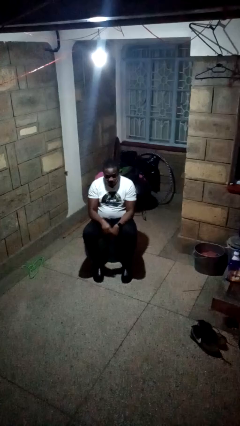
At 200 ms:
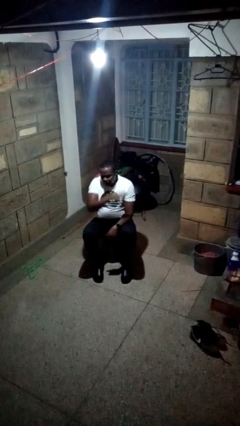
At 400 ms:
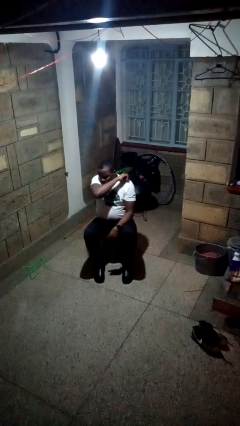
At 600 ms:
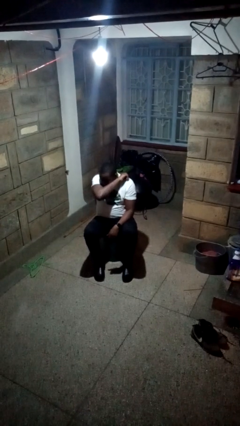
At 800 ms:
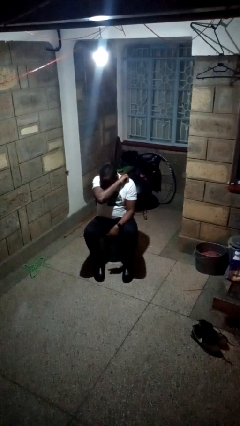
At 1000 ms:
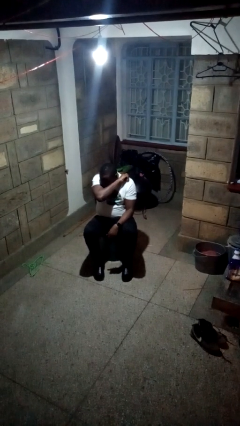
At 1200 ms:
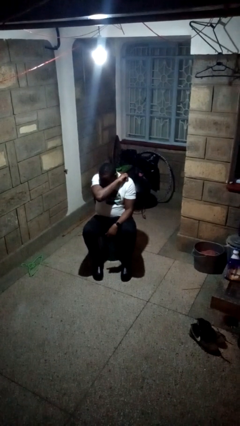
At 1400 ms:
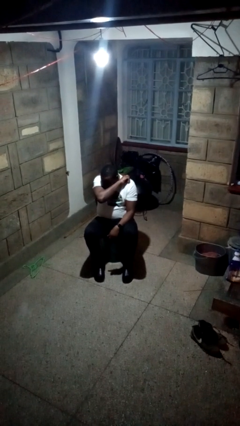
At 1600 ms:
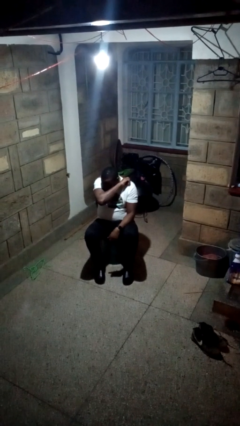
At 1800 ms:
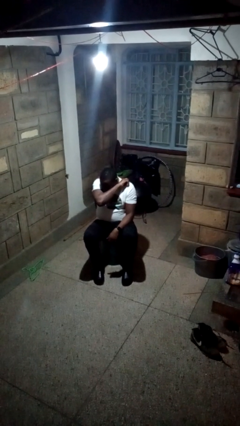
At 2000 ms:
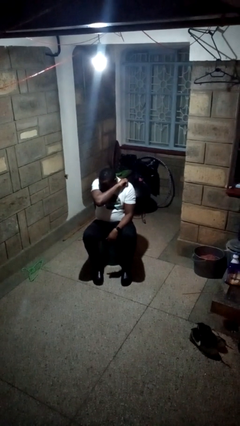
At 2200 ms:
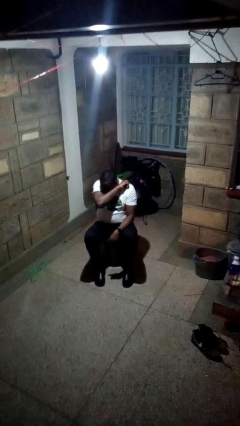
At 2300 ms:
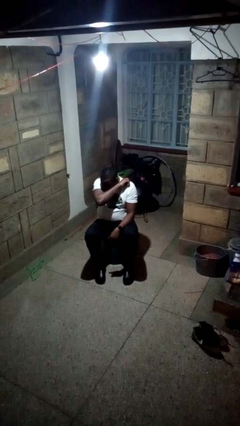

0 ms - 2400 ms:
person sneezes into arm

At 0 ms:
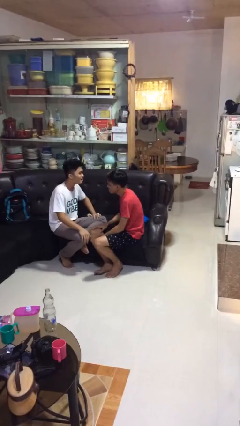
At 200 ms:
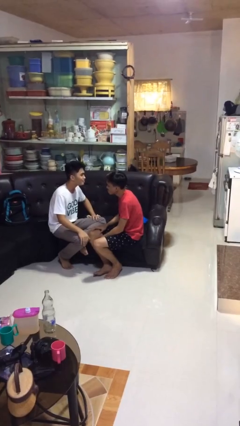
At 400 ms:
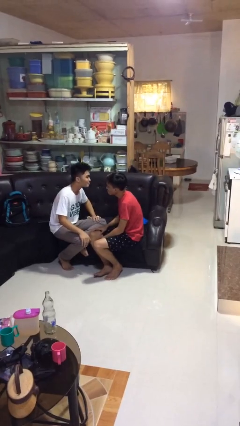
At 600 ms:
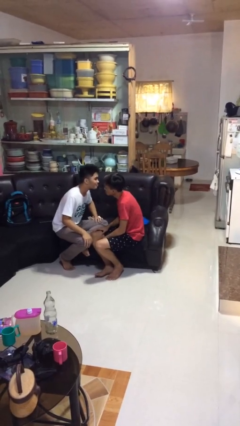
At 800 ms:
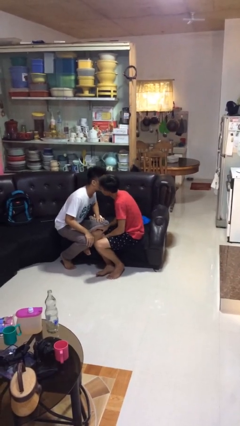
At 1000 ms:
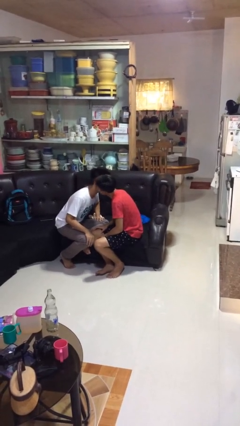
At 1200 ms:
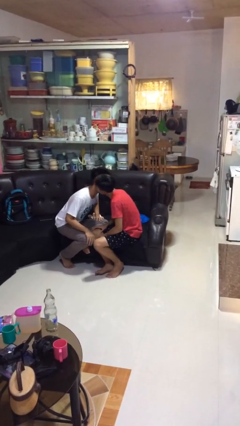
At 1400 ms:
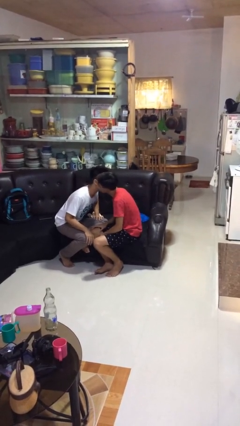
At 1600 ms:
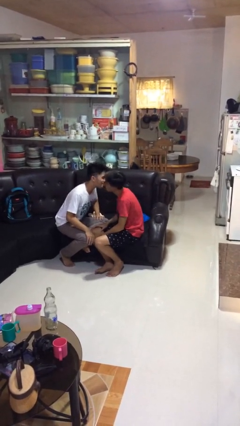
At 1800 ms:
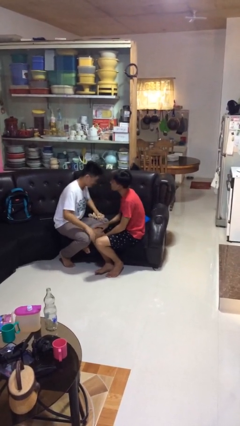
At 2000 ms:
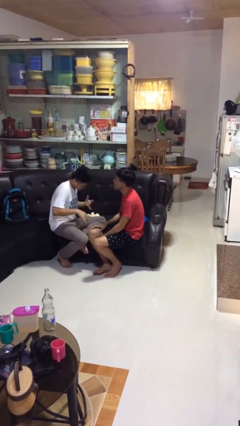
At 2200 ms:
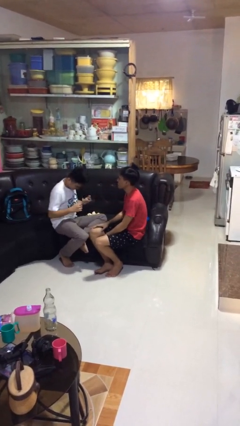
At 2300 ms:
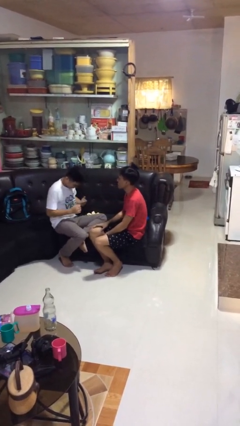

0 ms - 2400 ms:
person kisses cheek of person

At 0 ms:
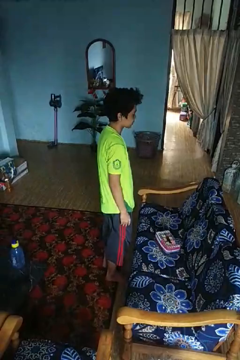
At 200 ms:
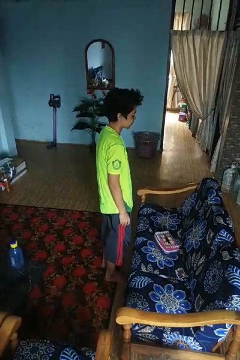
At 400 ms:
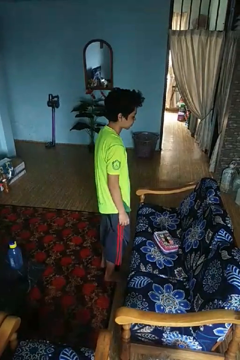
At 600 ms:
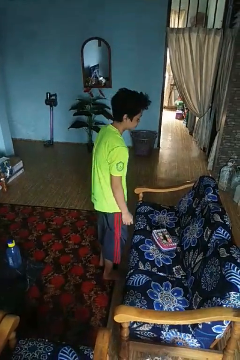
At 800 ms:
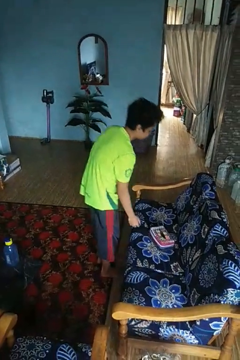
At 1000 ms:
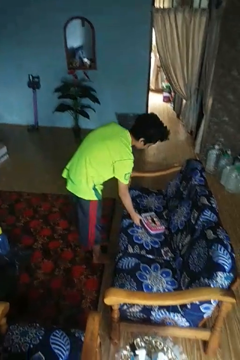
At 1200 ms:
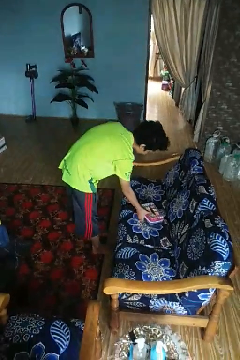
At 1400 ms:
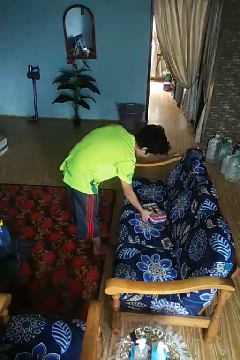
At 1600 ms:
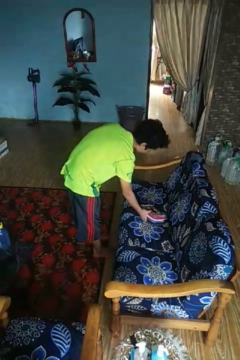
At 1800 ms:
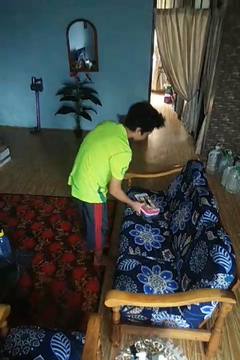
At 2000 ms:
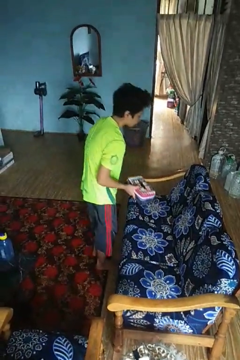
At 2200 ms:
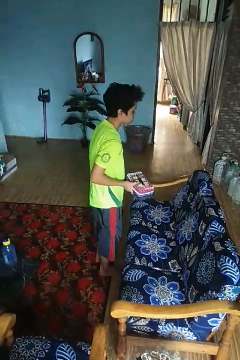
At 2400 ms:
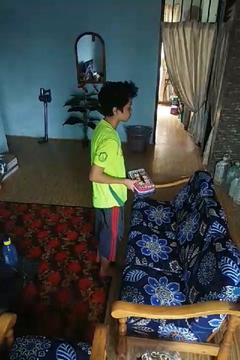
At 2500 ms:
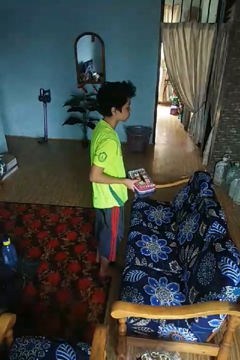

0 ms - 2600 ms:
person picks up object from couch

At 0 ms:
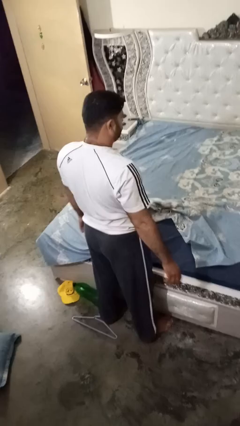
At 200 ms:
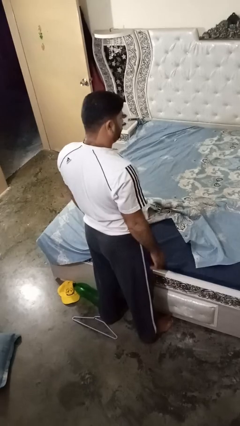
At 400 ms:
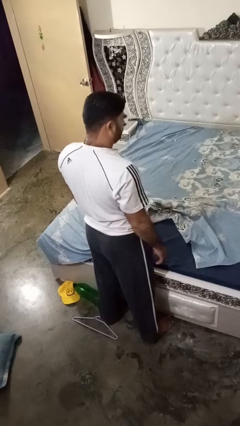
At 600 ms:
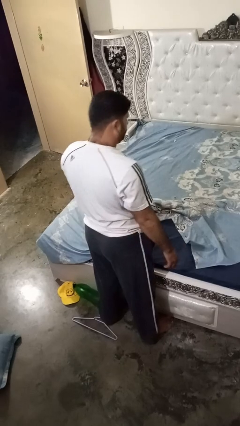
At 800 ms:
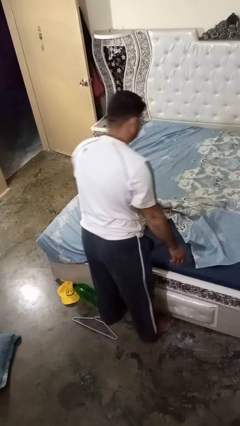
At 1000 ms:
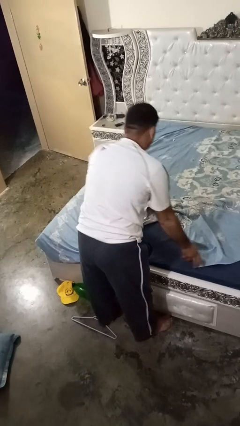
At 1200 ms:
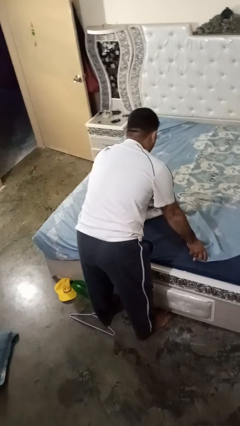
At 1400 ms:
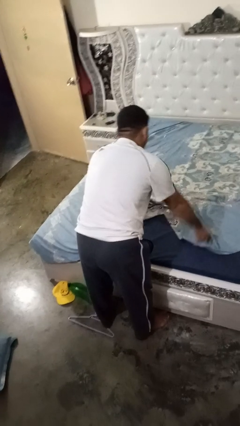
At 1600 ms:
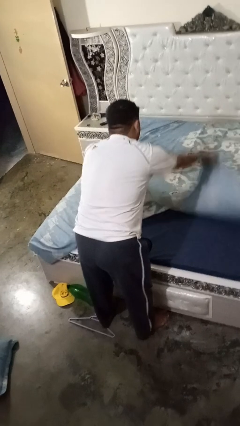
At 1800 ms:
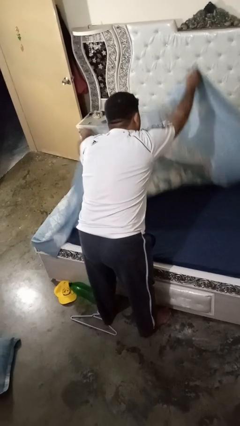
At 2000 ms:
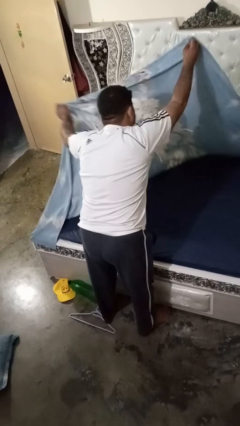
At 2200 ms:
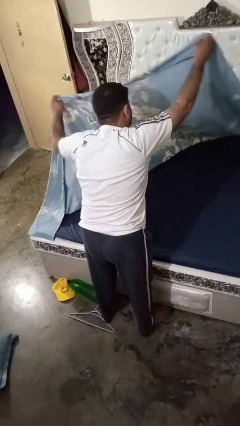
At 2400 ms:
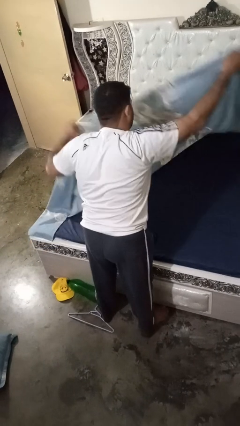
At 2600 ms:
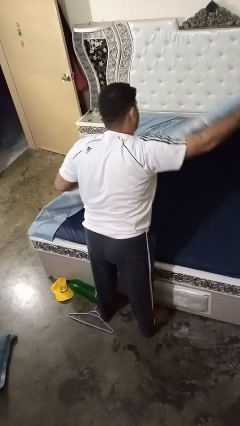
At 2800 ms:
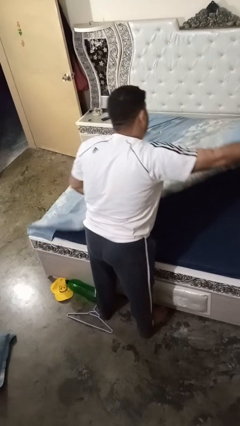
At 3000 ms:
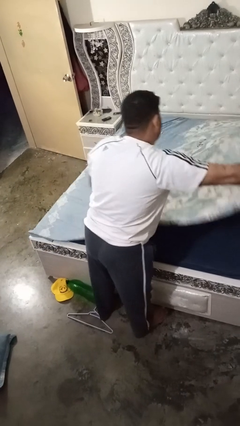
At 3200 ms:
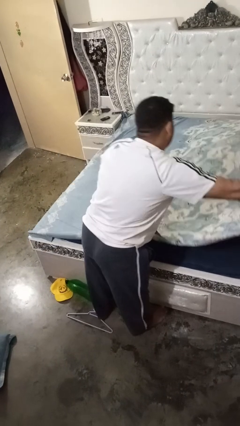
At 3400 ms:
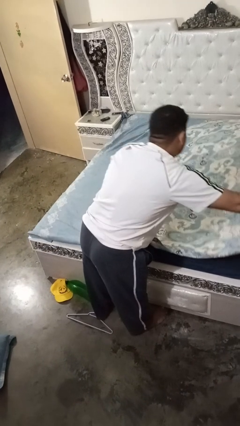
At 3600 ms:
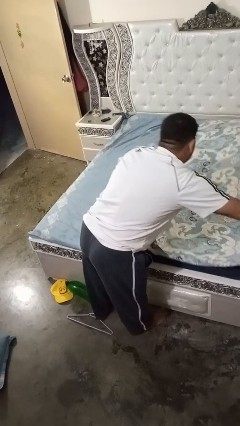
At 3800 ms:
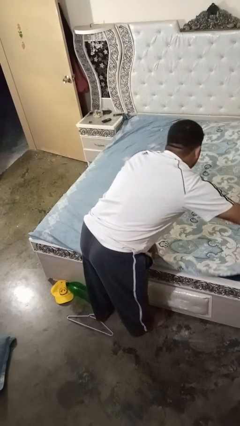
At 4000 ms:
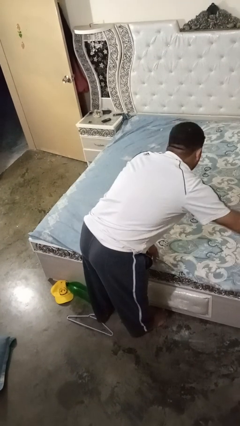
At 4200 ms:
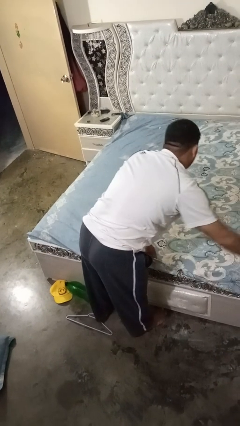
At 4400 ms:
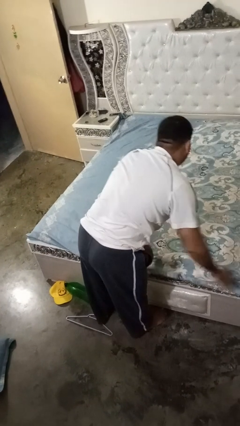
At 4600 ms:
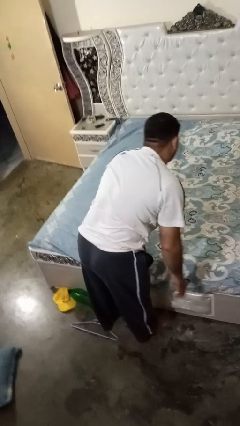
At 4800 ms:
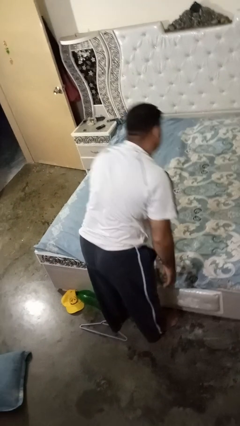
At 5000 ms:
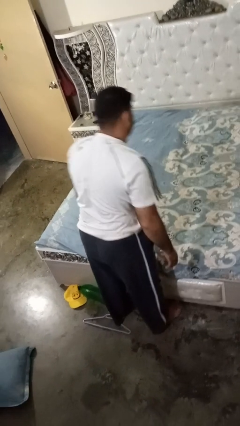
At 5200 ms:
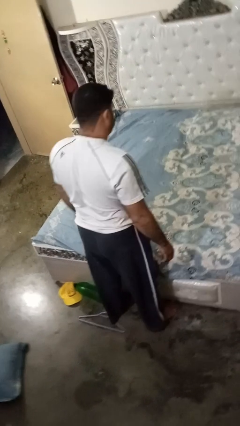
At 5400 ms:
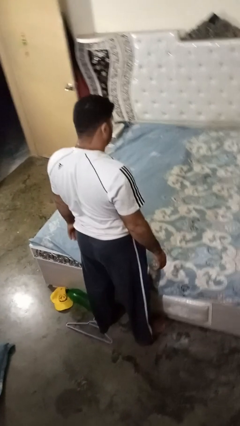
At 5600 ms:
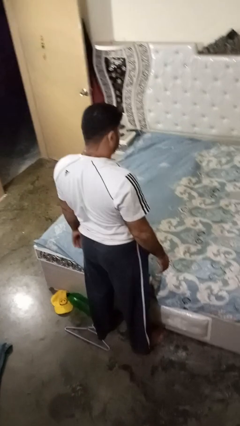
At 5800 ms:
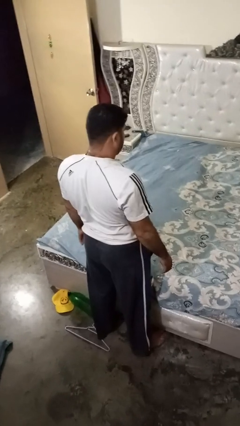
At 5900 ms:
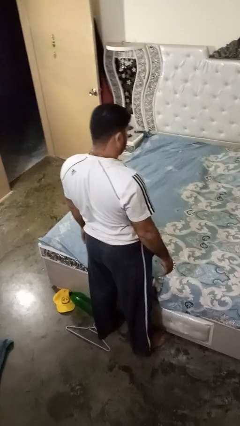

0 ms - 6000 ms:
person makes bed

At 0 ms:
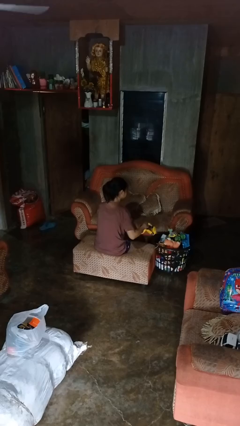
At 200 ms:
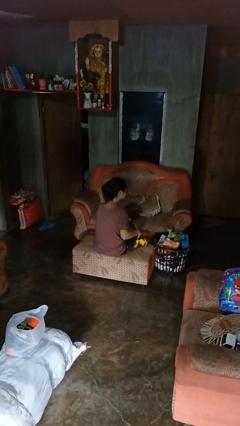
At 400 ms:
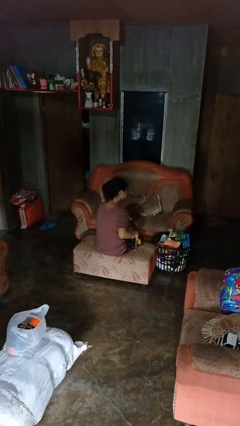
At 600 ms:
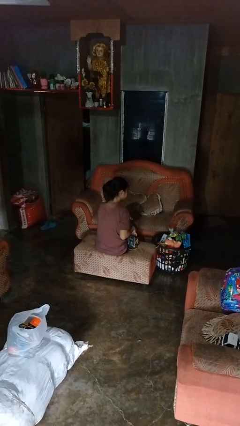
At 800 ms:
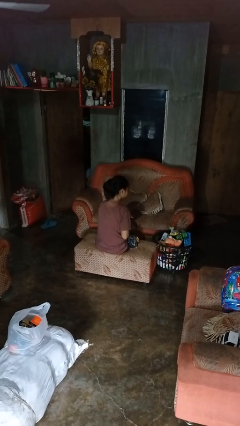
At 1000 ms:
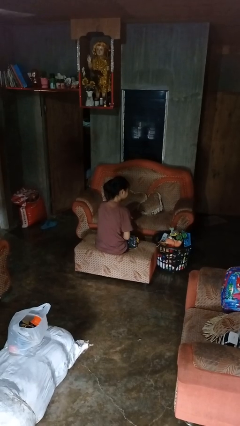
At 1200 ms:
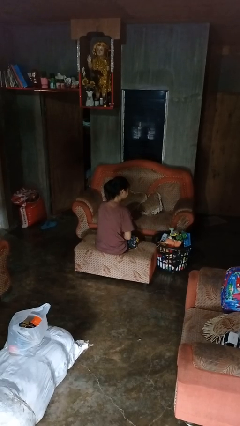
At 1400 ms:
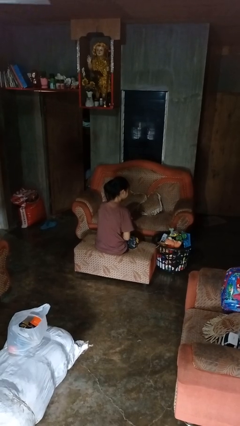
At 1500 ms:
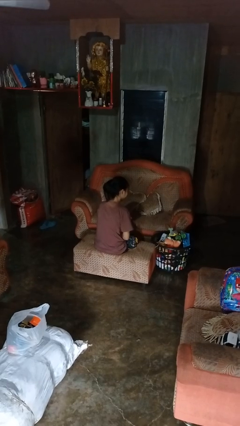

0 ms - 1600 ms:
person takes object from basket

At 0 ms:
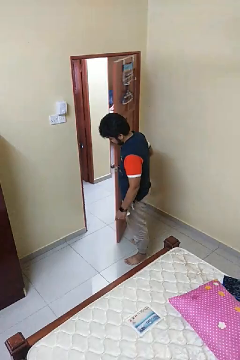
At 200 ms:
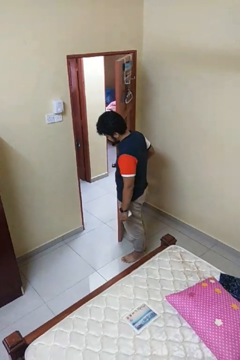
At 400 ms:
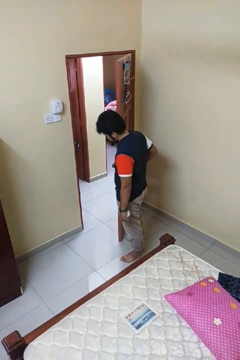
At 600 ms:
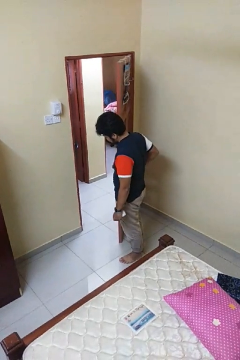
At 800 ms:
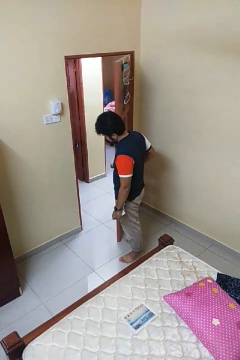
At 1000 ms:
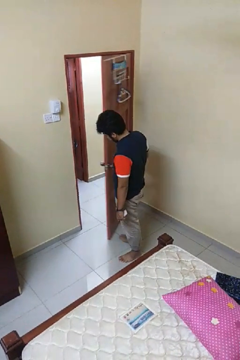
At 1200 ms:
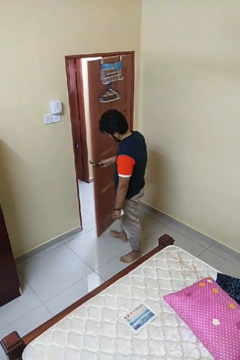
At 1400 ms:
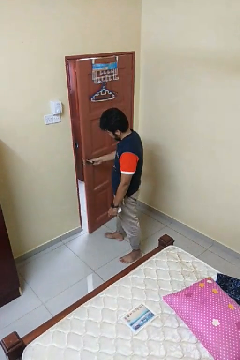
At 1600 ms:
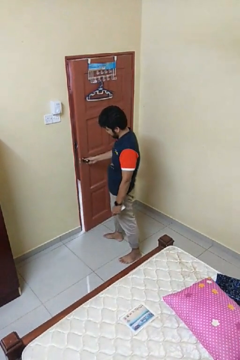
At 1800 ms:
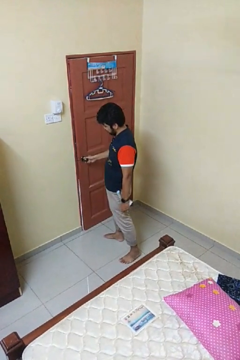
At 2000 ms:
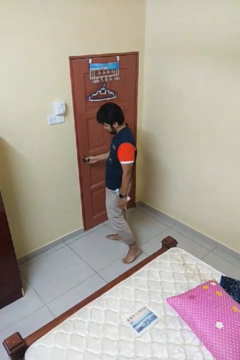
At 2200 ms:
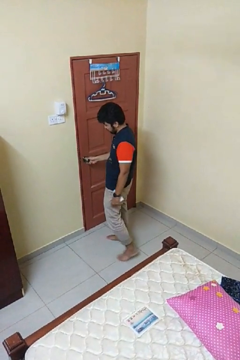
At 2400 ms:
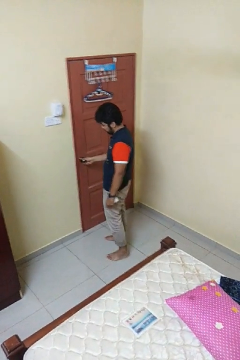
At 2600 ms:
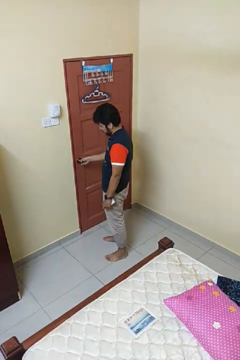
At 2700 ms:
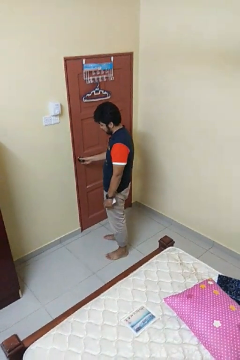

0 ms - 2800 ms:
person closes facility door

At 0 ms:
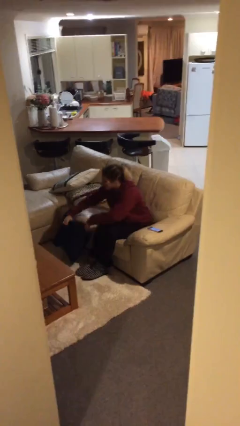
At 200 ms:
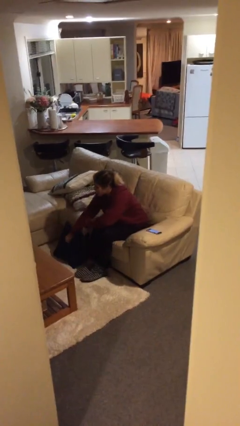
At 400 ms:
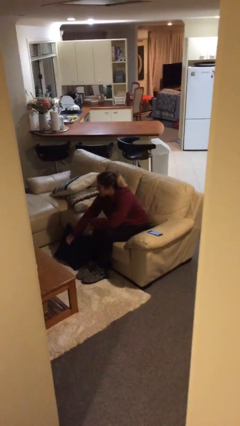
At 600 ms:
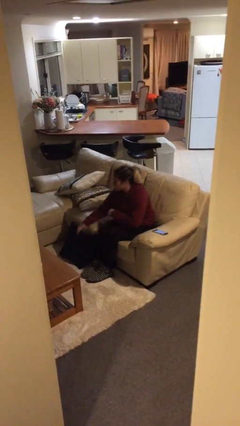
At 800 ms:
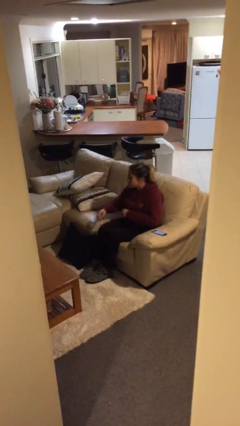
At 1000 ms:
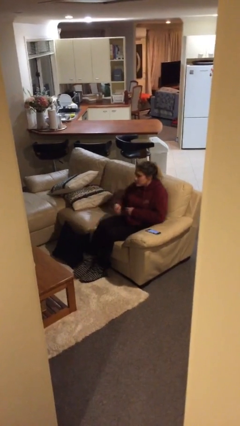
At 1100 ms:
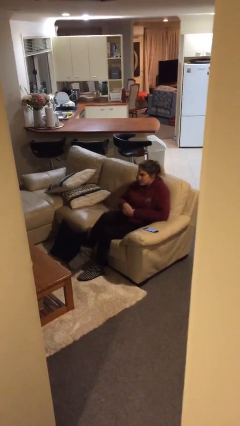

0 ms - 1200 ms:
person puts down object on floor
